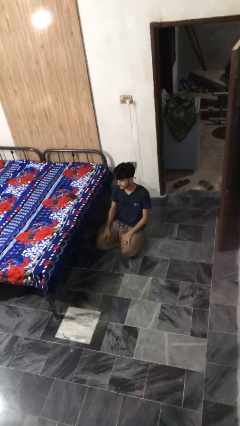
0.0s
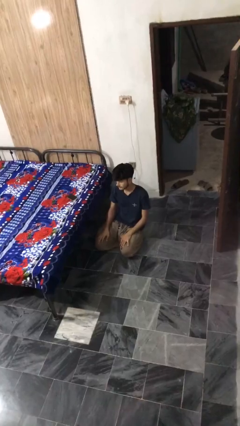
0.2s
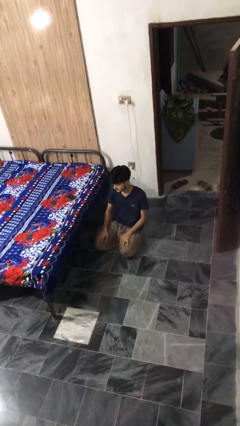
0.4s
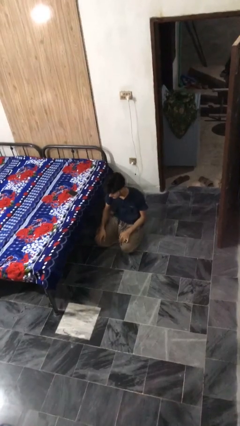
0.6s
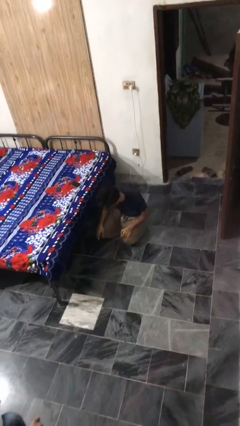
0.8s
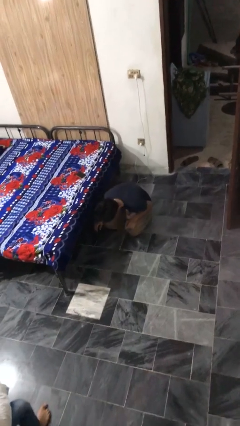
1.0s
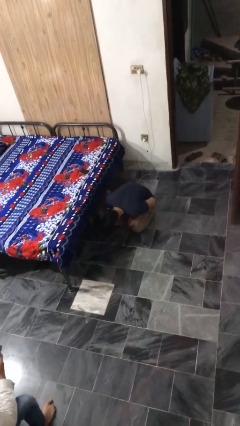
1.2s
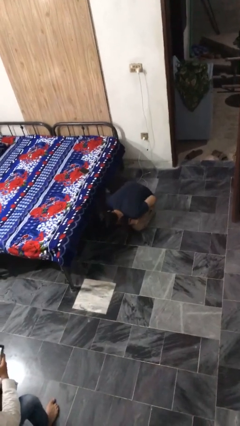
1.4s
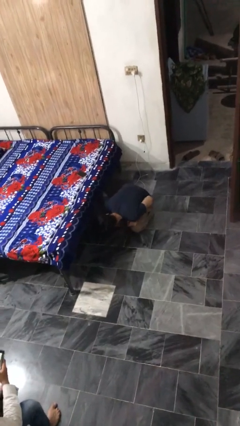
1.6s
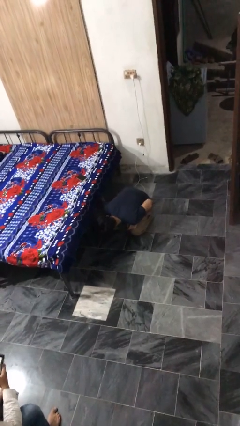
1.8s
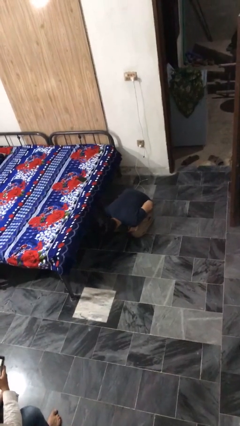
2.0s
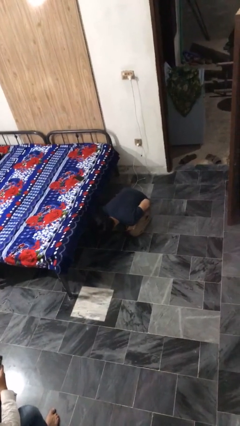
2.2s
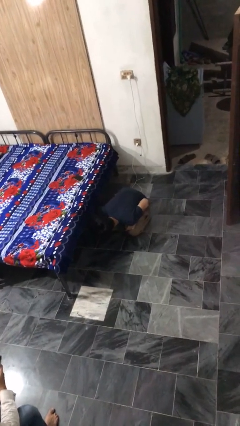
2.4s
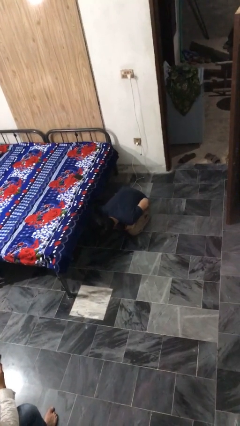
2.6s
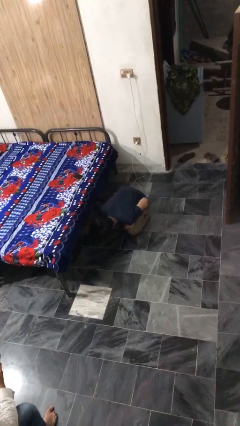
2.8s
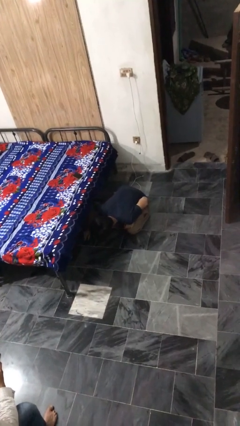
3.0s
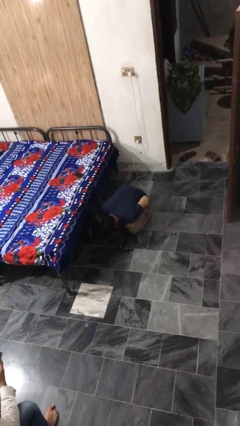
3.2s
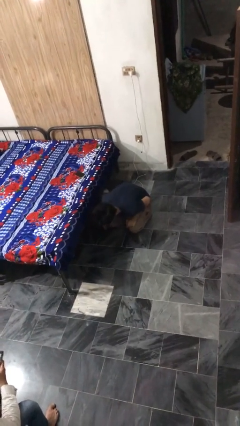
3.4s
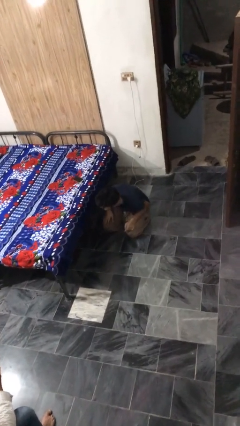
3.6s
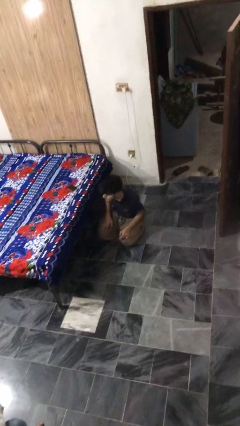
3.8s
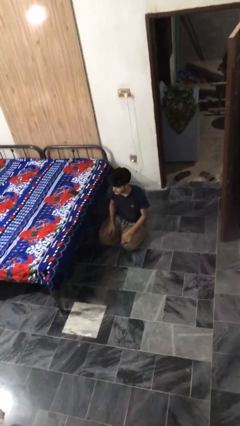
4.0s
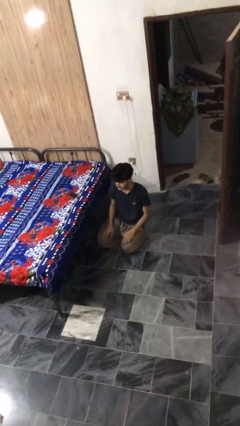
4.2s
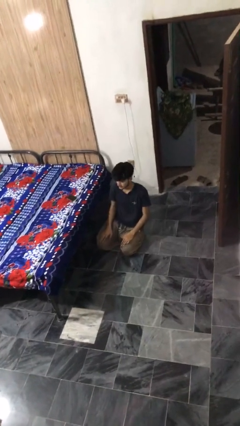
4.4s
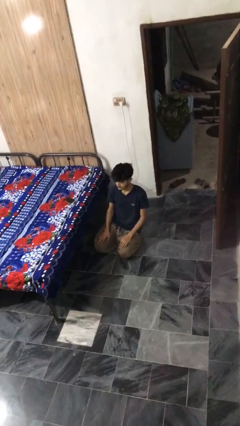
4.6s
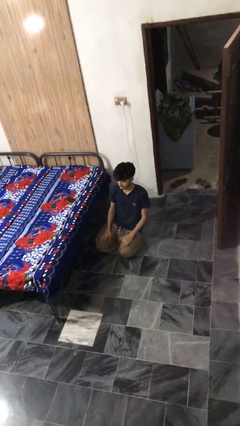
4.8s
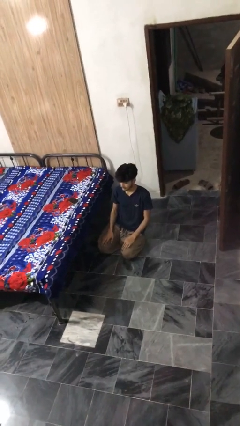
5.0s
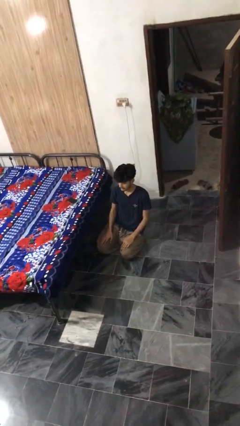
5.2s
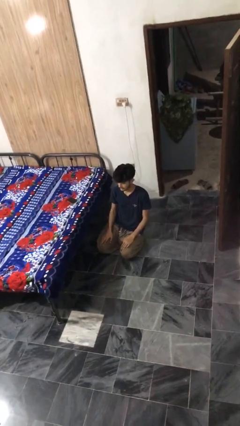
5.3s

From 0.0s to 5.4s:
person searches under bed

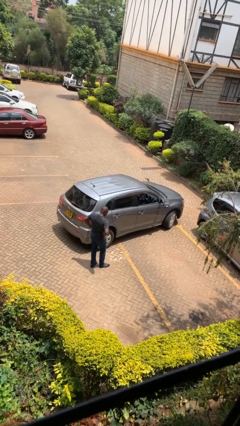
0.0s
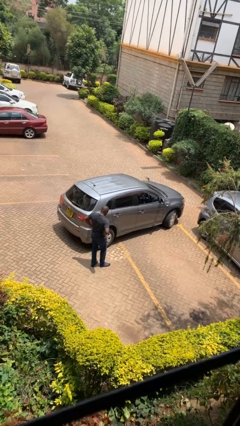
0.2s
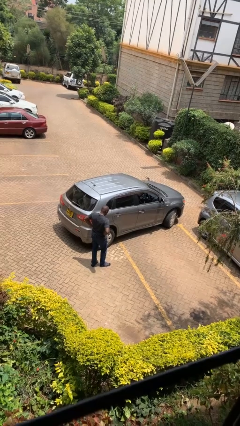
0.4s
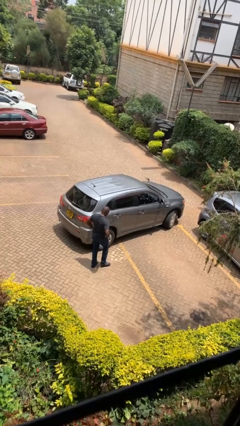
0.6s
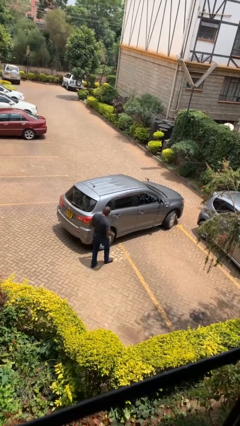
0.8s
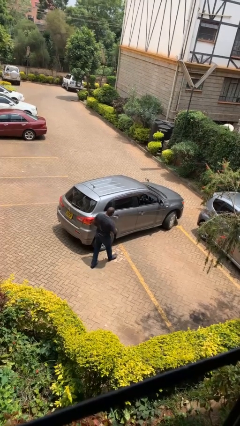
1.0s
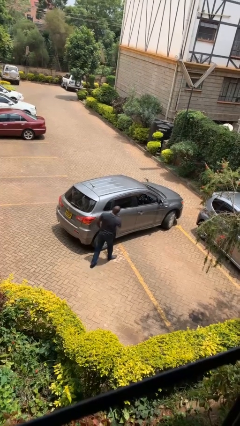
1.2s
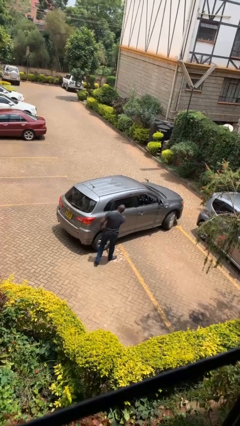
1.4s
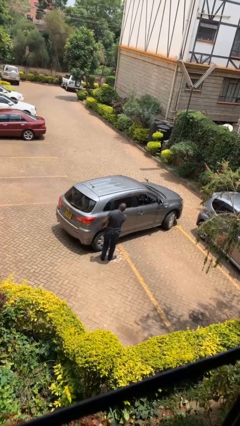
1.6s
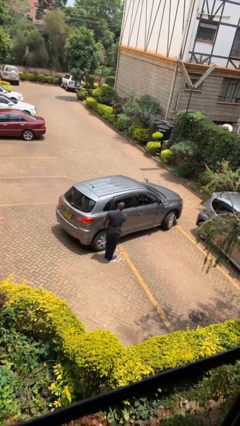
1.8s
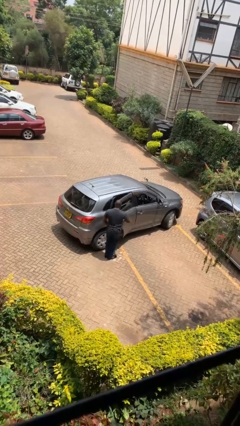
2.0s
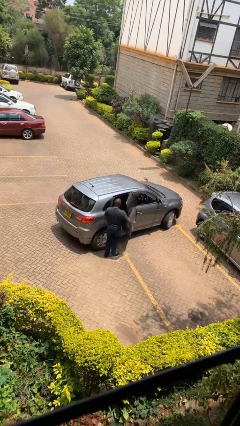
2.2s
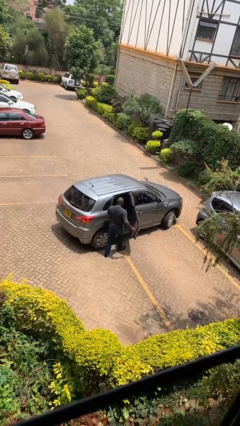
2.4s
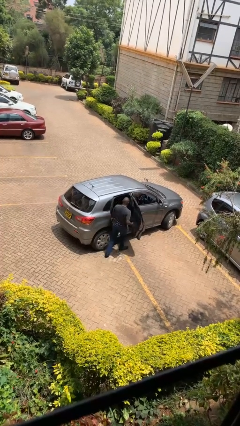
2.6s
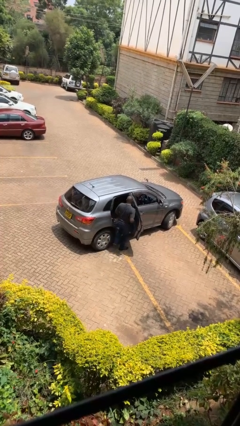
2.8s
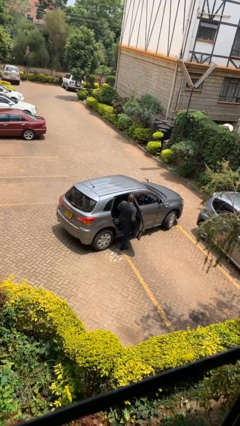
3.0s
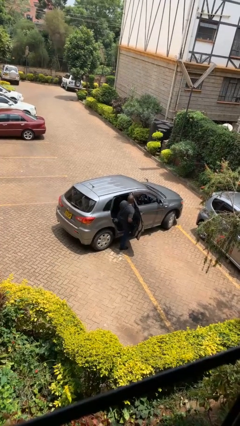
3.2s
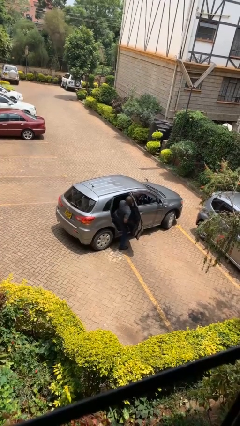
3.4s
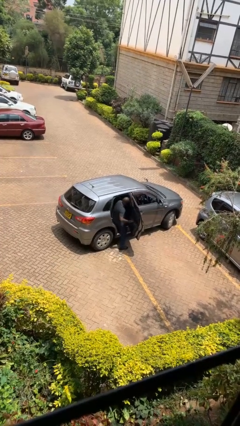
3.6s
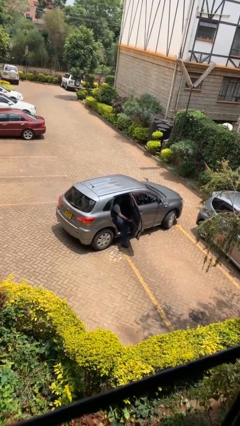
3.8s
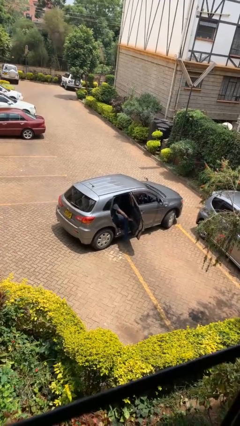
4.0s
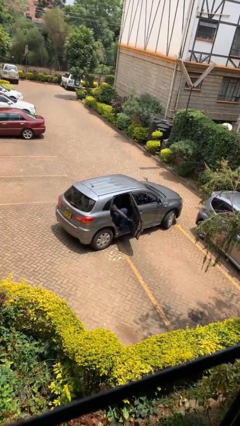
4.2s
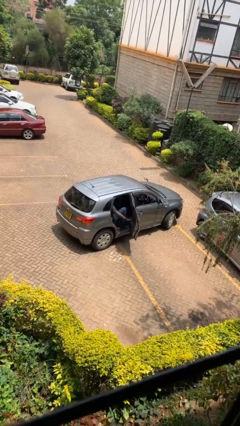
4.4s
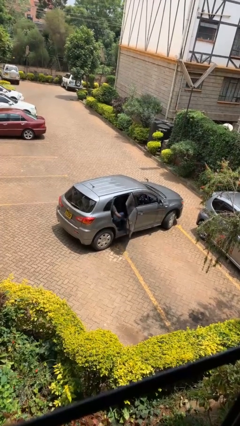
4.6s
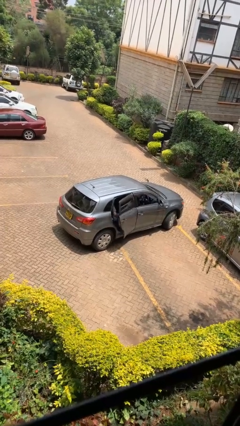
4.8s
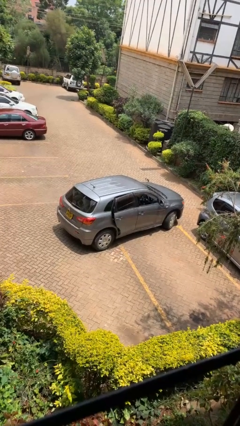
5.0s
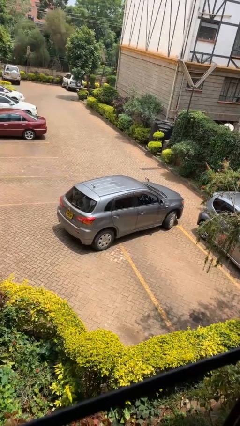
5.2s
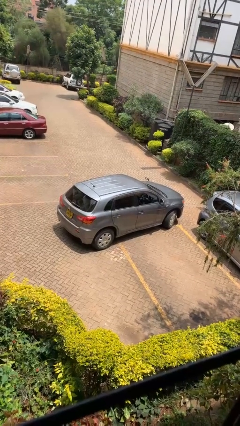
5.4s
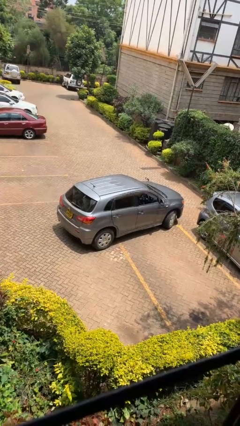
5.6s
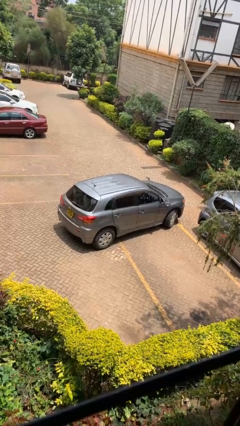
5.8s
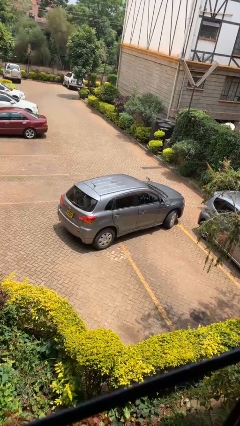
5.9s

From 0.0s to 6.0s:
car picks up person

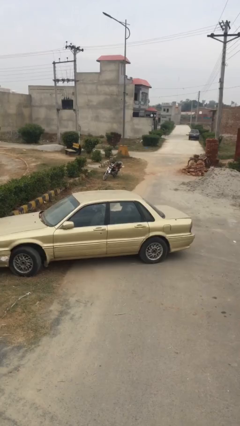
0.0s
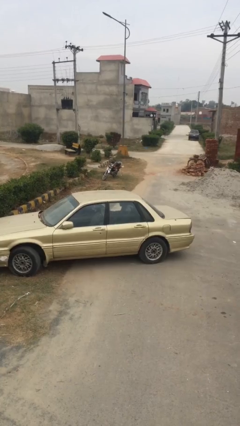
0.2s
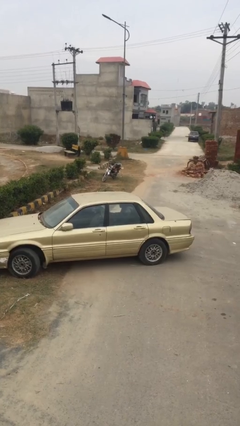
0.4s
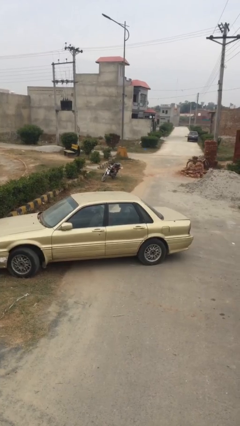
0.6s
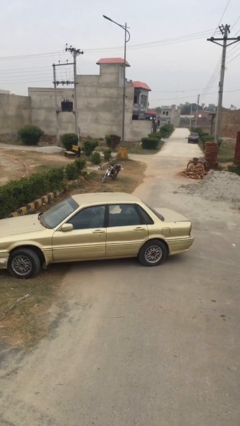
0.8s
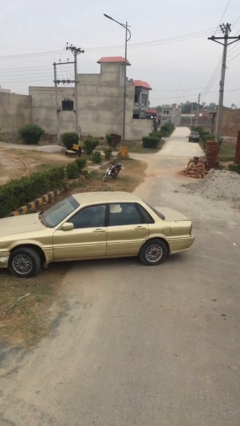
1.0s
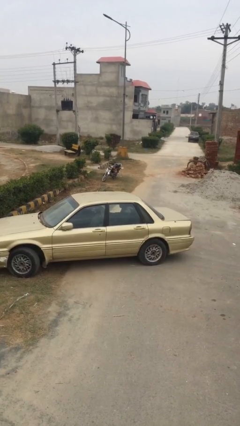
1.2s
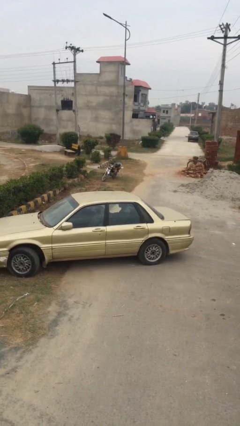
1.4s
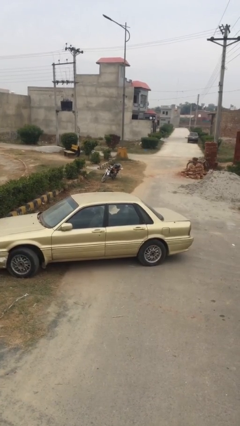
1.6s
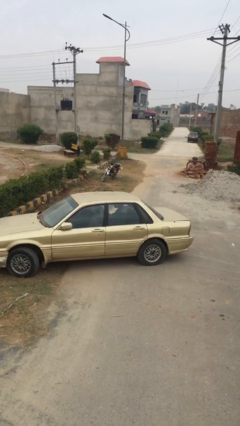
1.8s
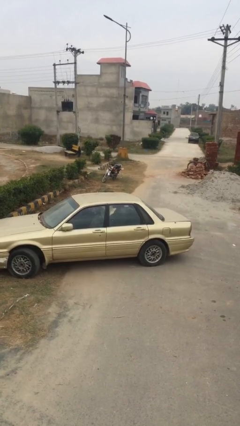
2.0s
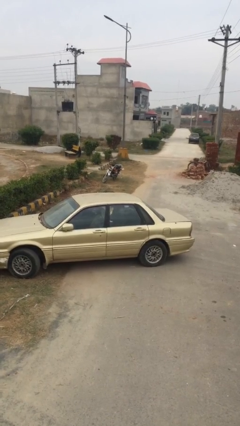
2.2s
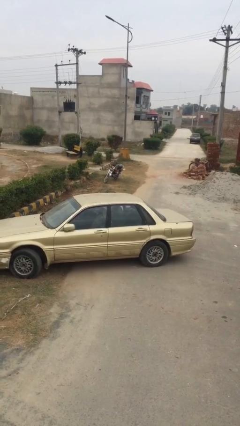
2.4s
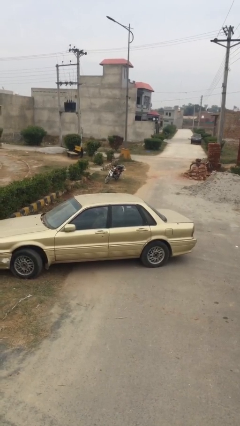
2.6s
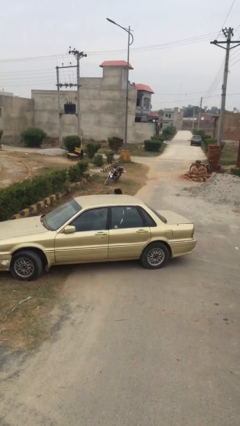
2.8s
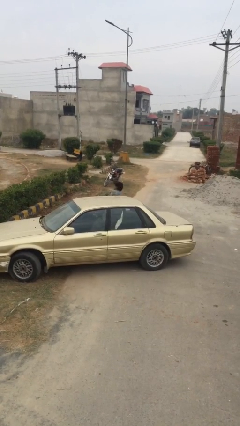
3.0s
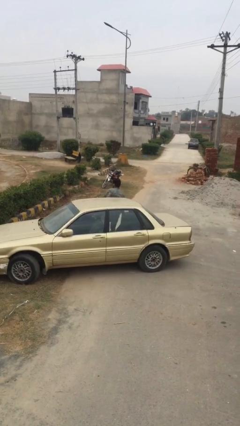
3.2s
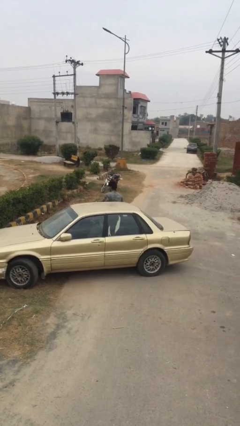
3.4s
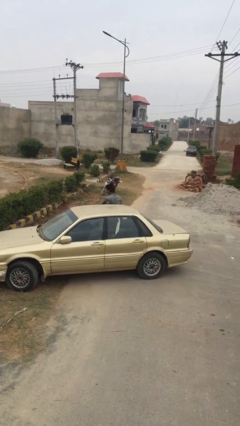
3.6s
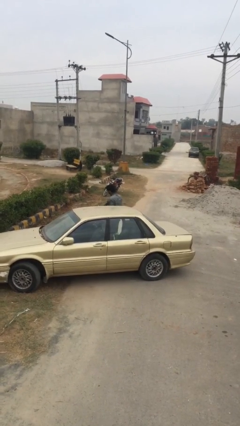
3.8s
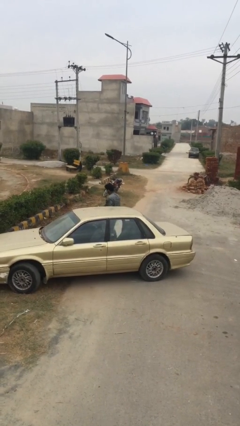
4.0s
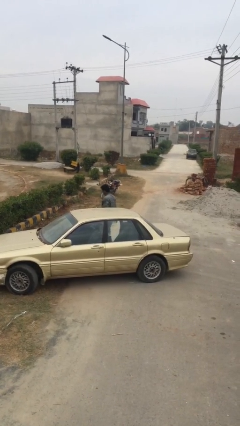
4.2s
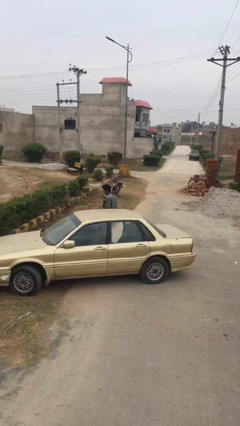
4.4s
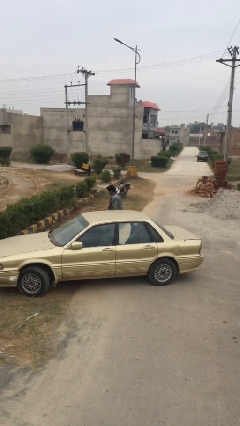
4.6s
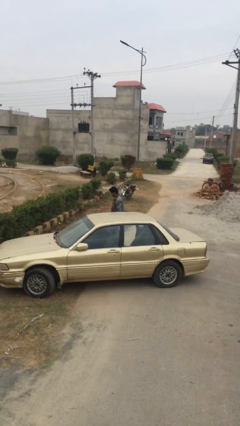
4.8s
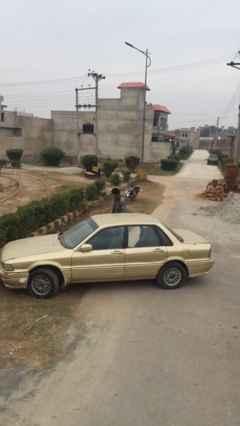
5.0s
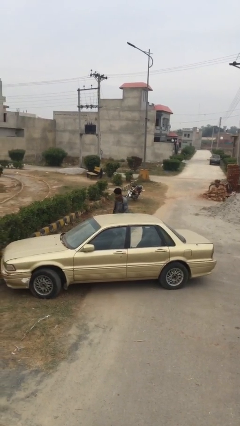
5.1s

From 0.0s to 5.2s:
person exits car

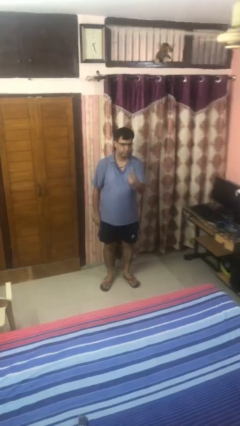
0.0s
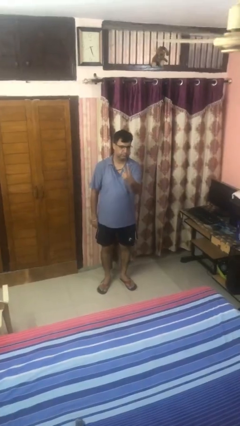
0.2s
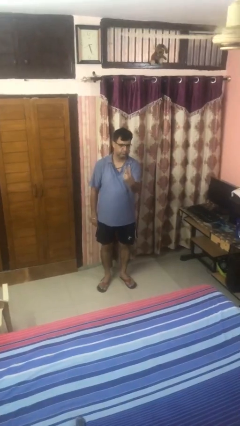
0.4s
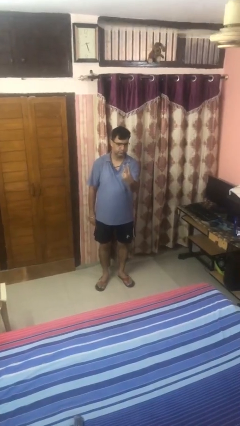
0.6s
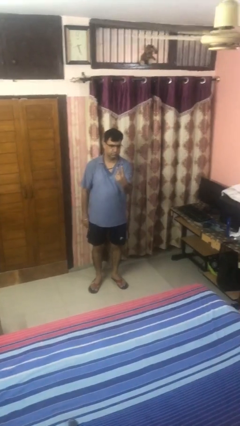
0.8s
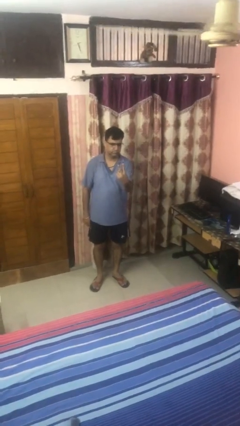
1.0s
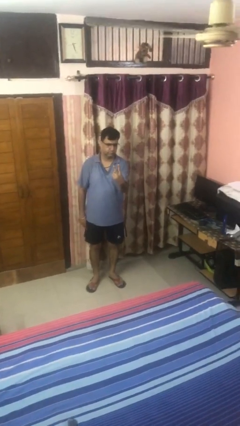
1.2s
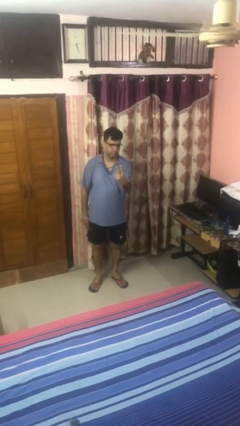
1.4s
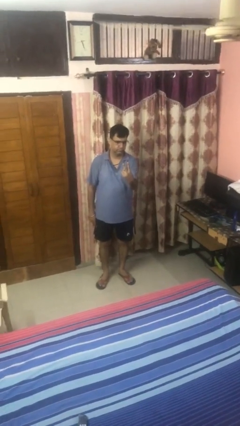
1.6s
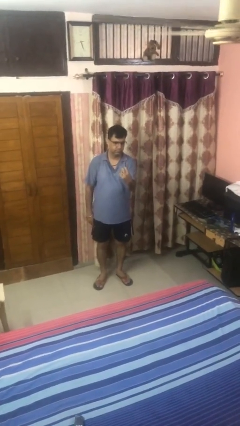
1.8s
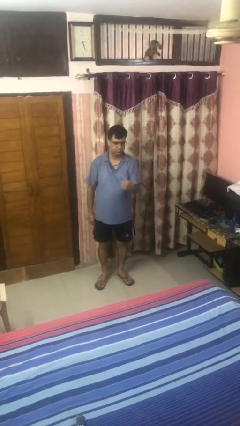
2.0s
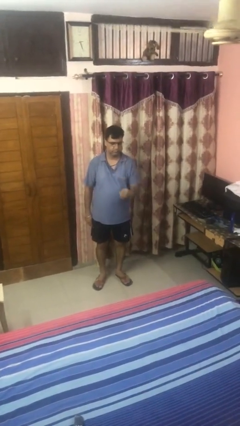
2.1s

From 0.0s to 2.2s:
person gestures peace
